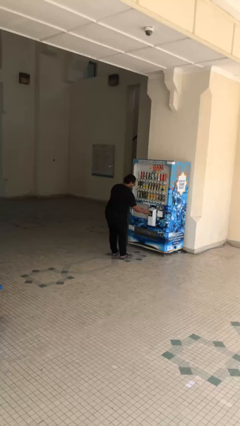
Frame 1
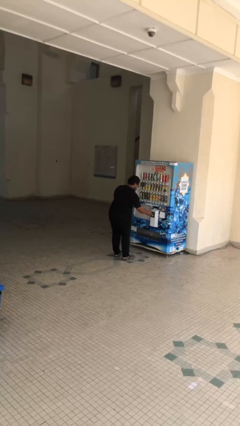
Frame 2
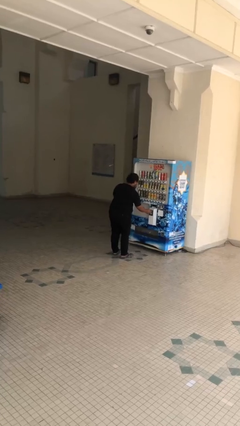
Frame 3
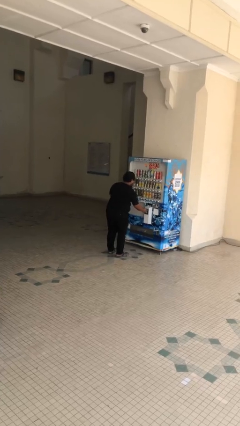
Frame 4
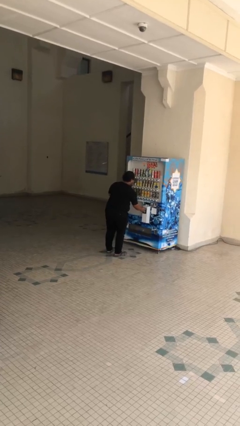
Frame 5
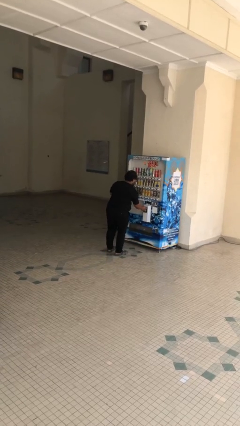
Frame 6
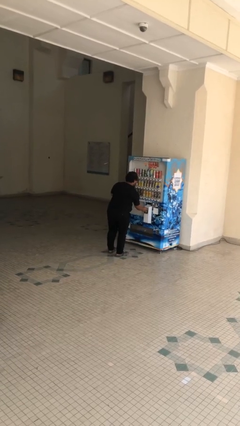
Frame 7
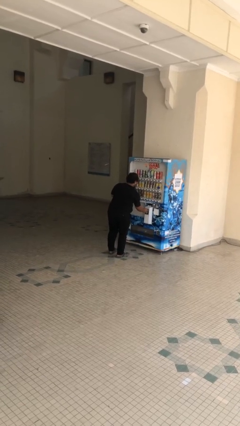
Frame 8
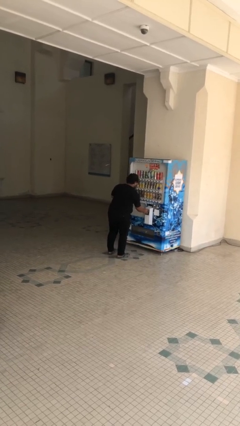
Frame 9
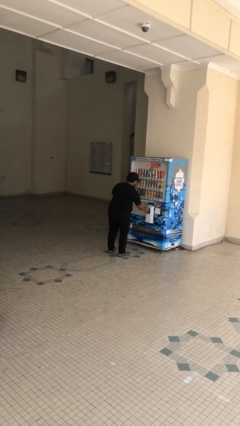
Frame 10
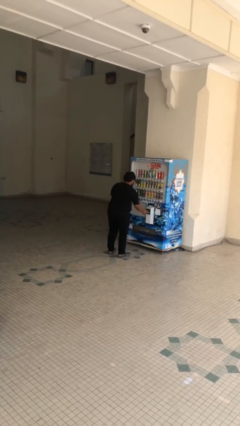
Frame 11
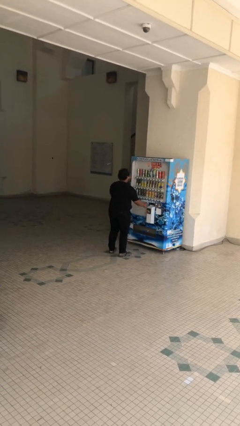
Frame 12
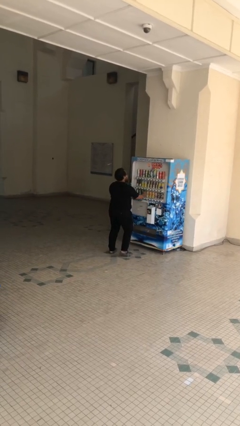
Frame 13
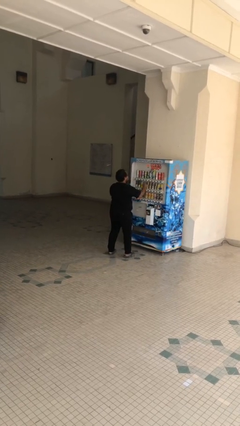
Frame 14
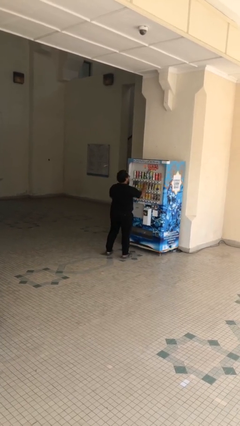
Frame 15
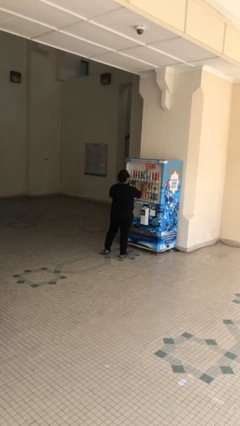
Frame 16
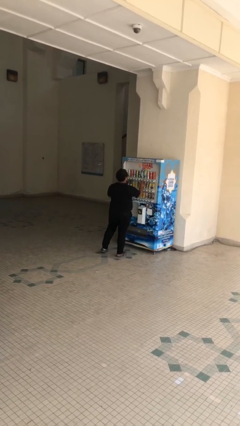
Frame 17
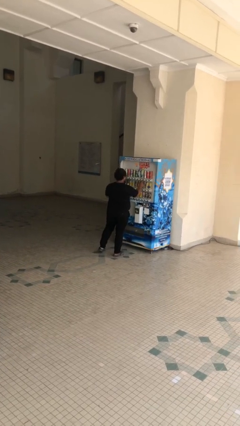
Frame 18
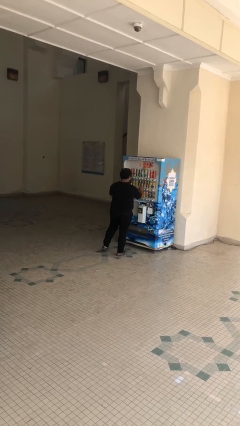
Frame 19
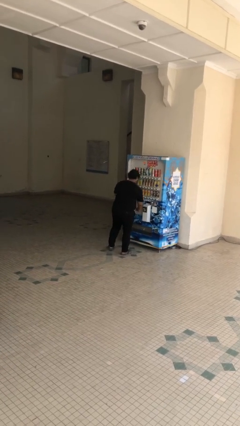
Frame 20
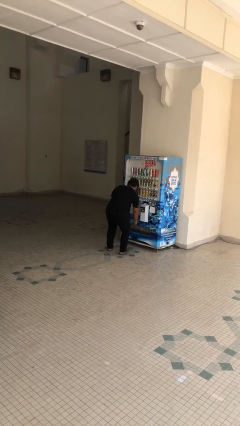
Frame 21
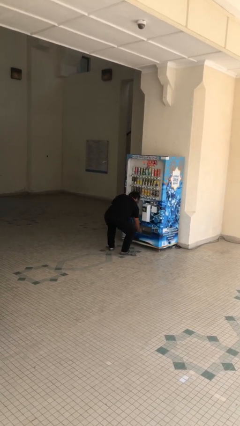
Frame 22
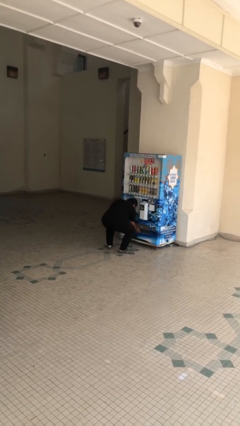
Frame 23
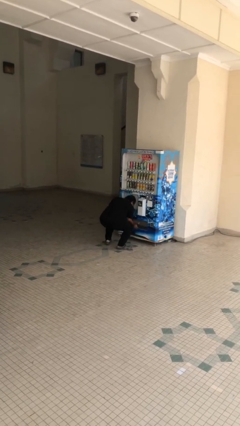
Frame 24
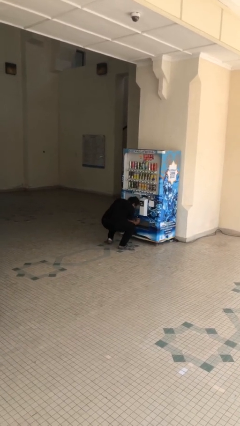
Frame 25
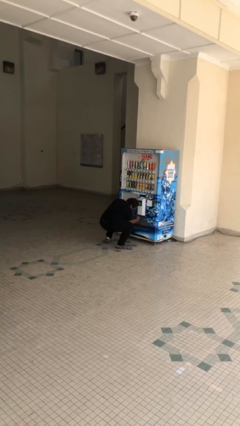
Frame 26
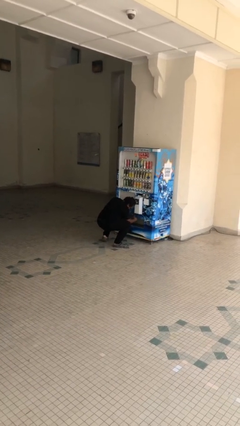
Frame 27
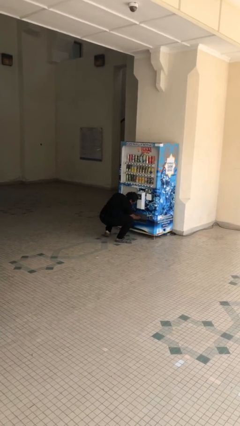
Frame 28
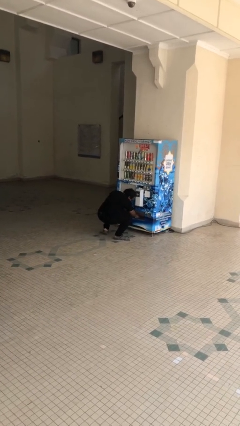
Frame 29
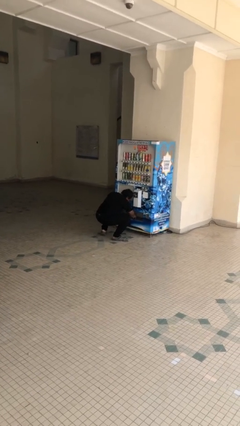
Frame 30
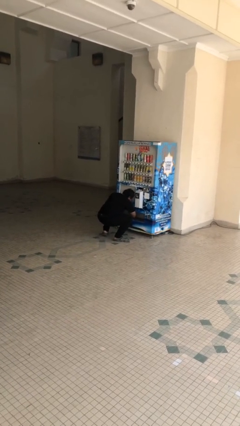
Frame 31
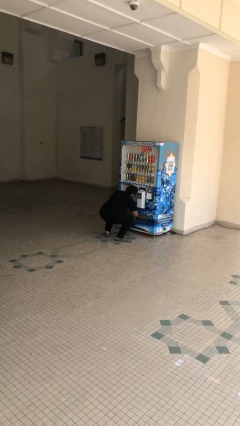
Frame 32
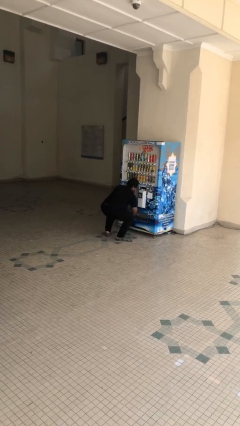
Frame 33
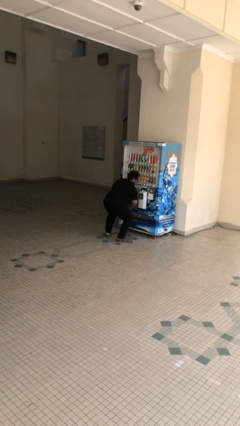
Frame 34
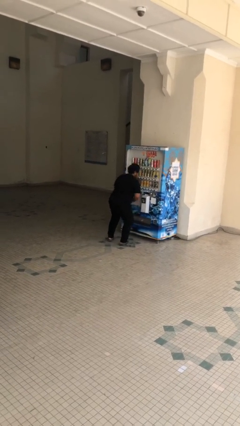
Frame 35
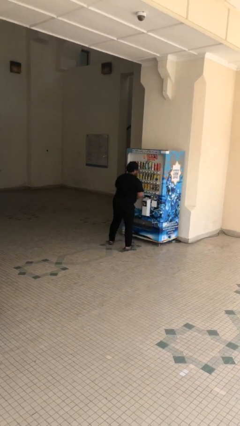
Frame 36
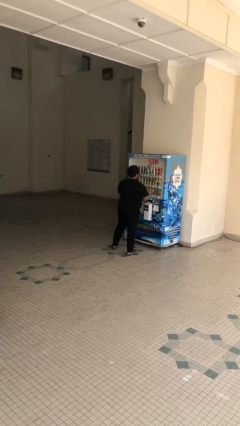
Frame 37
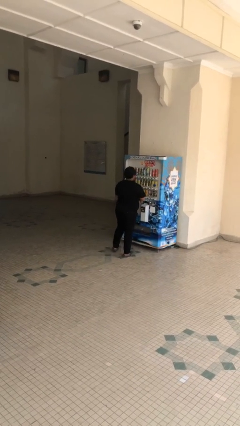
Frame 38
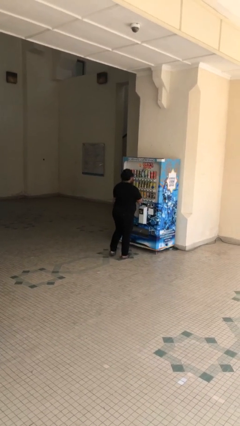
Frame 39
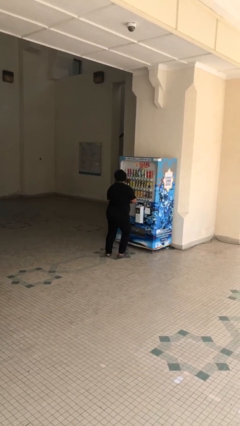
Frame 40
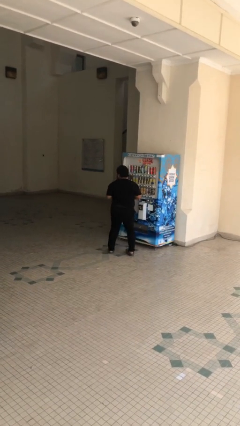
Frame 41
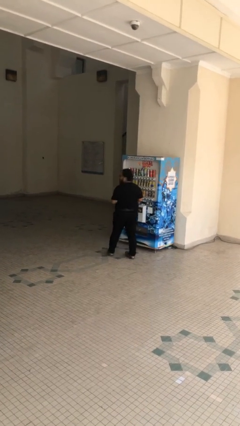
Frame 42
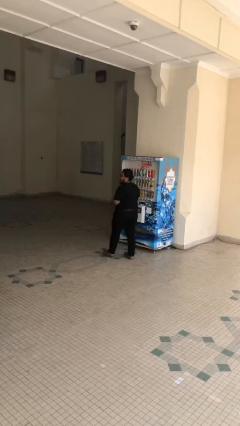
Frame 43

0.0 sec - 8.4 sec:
person purchases from machine

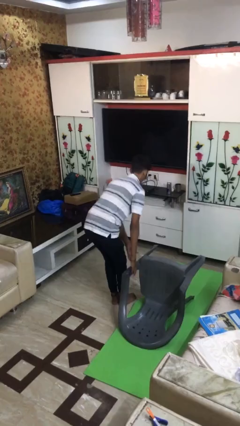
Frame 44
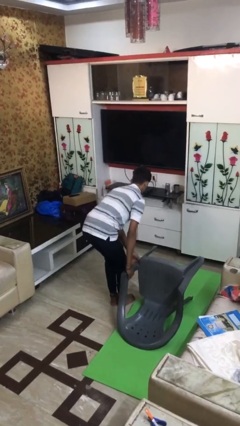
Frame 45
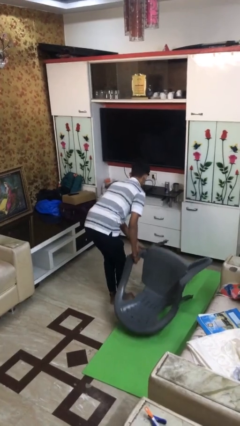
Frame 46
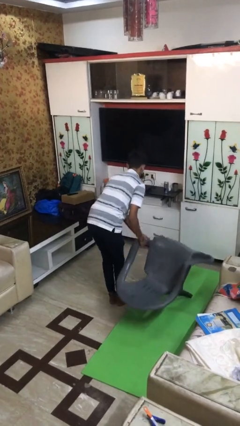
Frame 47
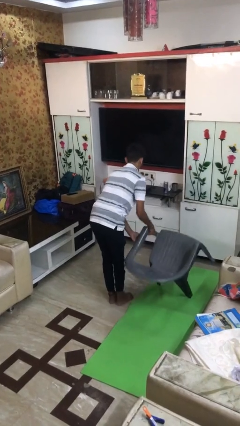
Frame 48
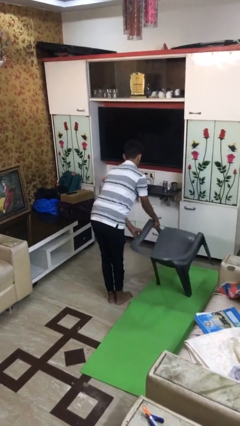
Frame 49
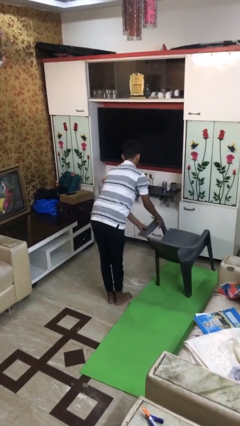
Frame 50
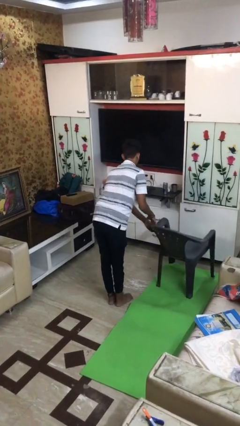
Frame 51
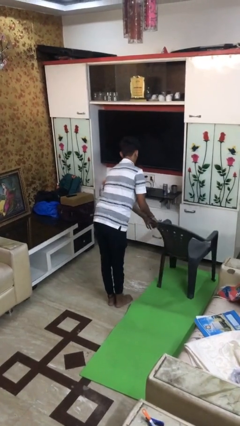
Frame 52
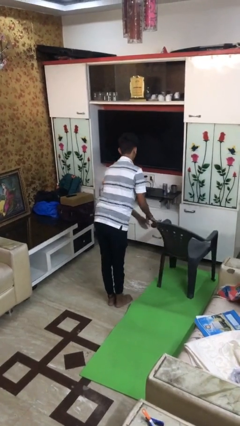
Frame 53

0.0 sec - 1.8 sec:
person sets upright furniture

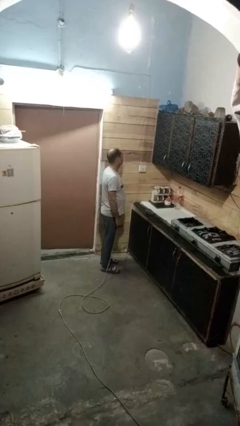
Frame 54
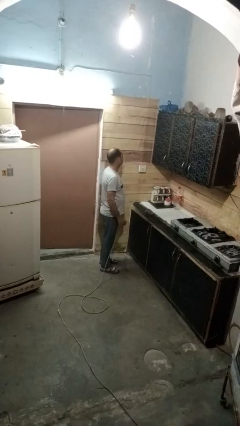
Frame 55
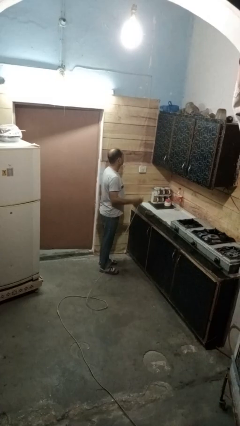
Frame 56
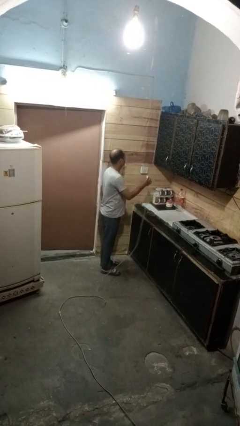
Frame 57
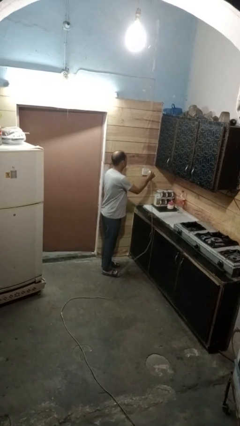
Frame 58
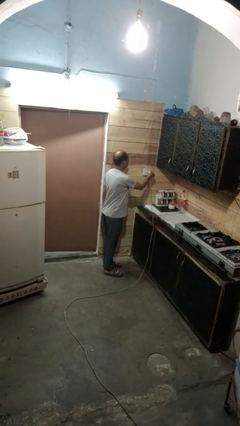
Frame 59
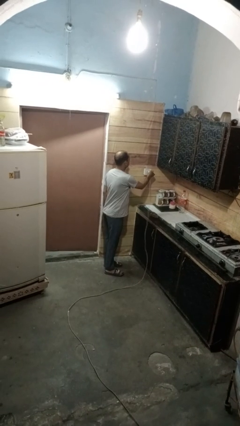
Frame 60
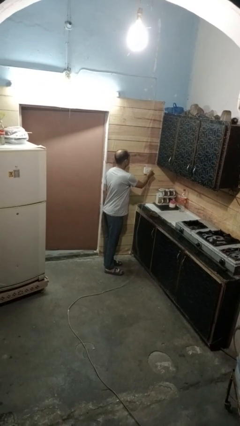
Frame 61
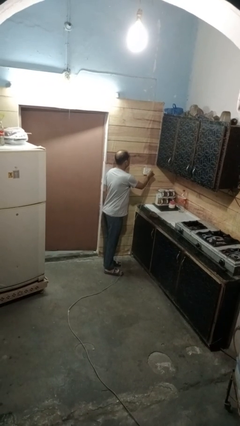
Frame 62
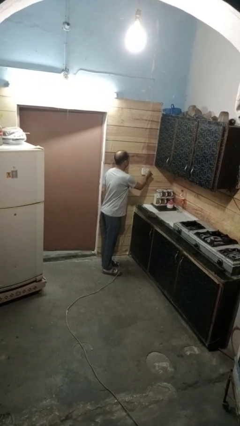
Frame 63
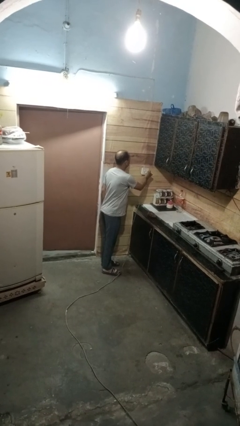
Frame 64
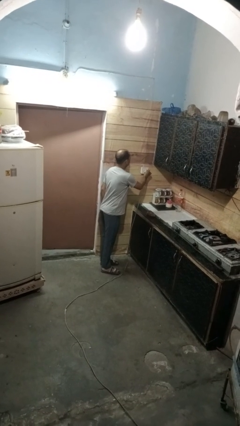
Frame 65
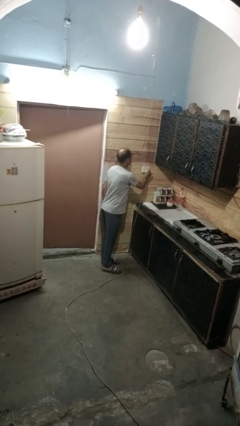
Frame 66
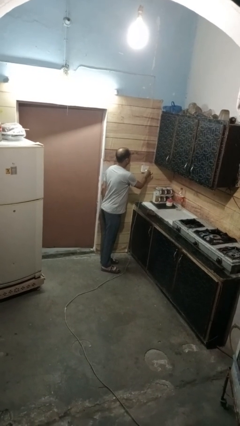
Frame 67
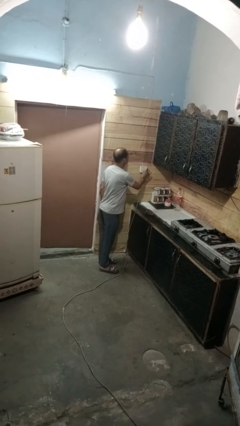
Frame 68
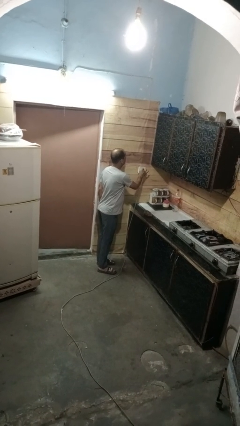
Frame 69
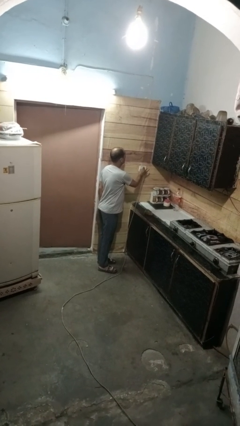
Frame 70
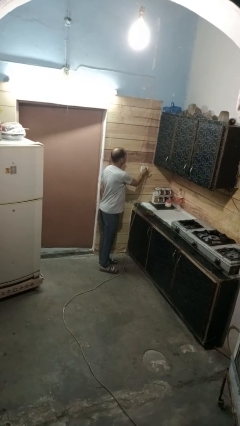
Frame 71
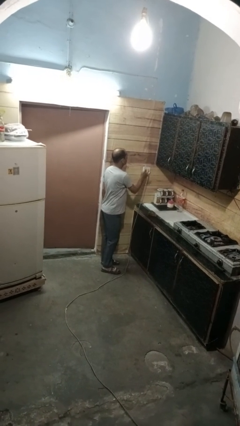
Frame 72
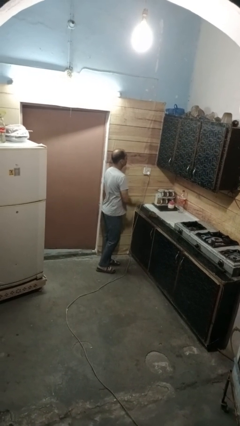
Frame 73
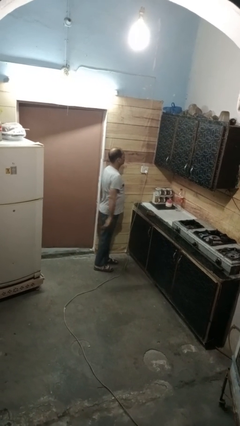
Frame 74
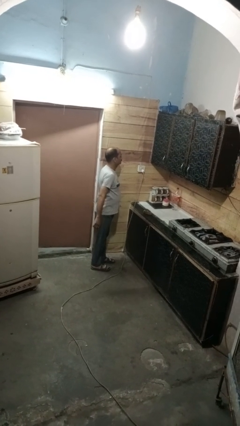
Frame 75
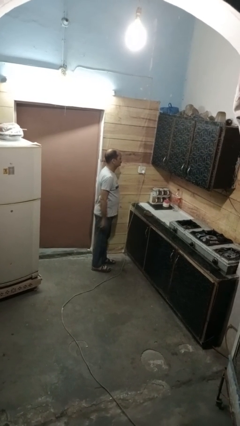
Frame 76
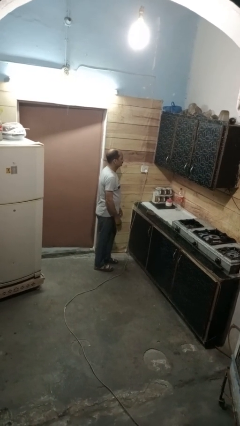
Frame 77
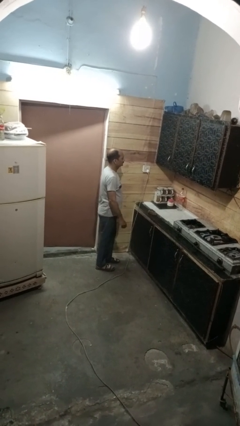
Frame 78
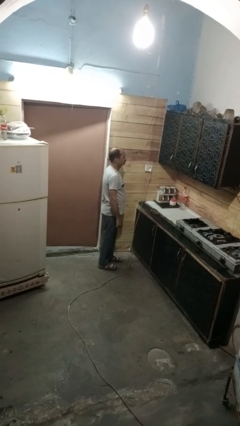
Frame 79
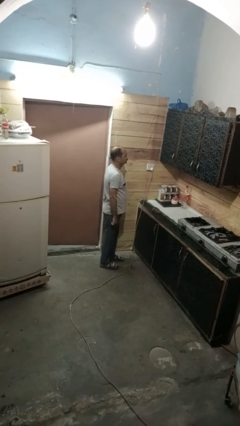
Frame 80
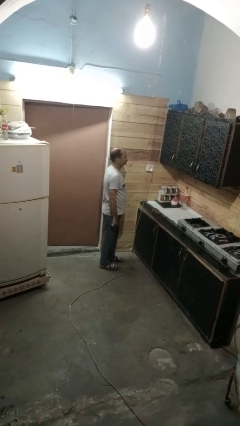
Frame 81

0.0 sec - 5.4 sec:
person plugs into electrical socket

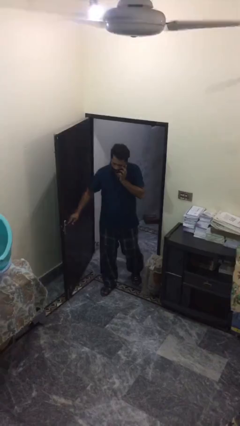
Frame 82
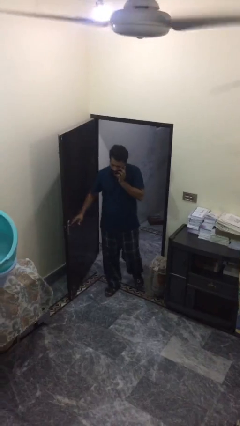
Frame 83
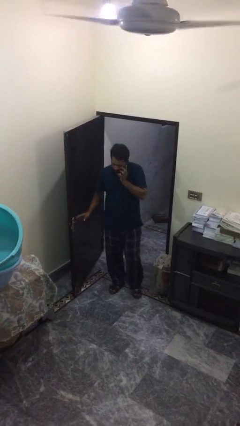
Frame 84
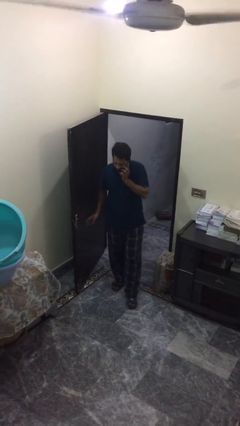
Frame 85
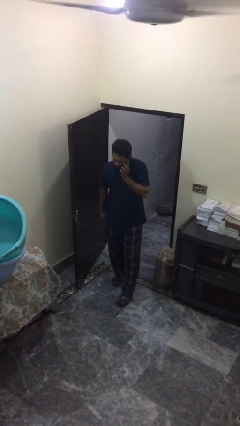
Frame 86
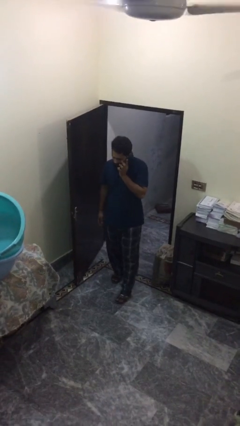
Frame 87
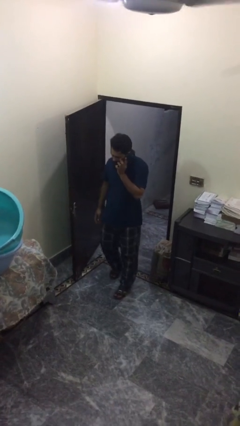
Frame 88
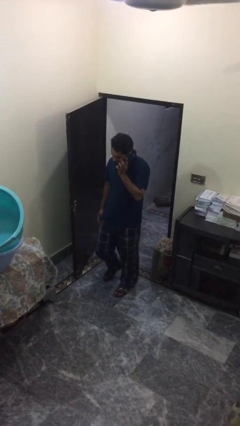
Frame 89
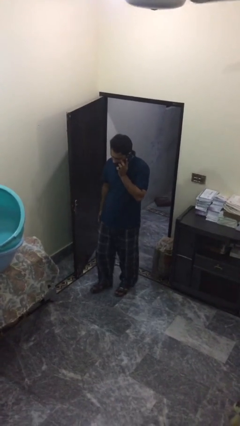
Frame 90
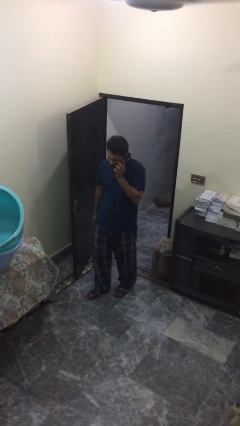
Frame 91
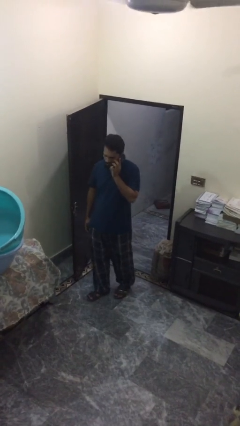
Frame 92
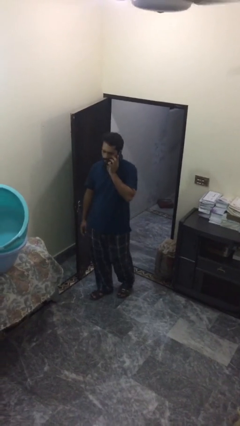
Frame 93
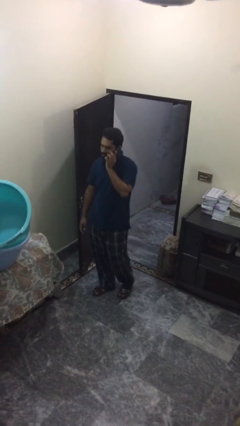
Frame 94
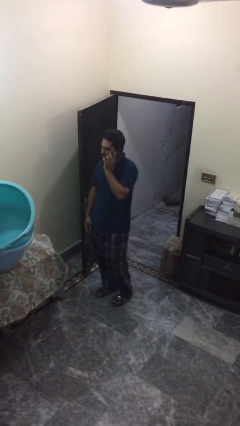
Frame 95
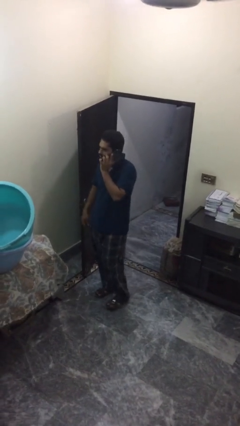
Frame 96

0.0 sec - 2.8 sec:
person enters scene through structure
